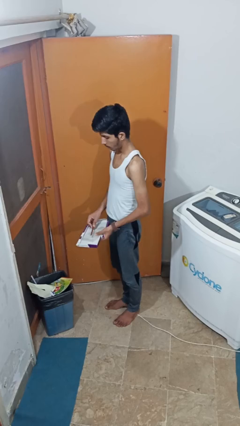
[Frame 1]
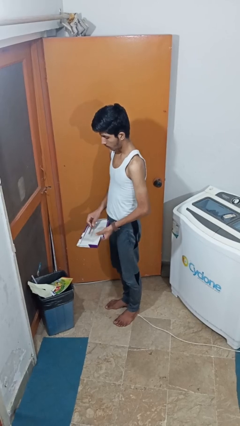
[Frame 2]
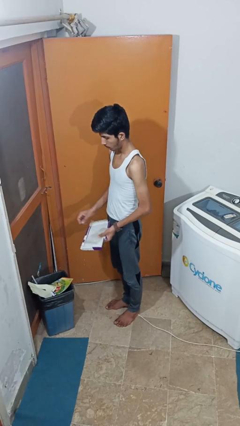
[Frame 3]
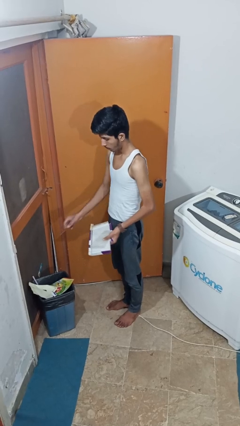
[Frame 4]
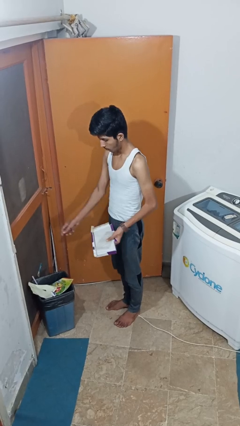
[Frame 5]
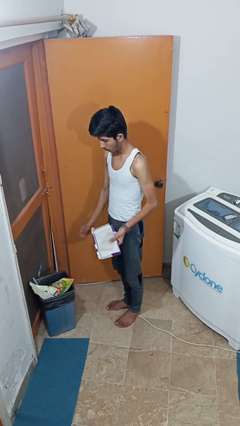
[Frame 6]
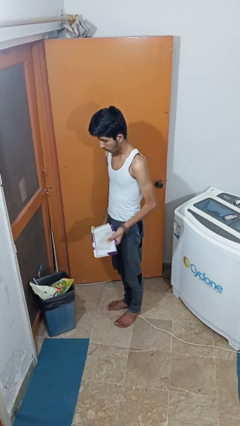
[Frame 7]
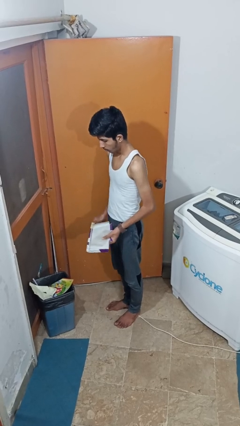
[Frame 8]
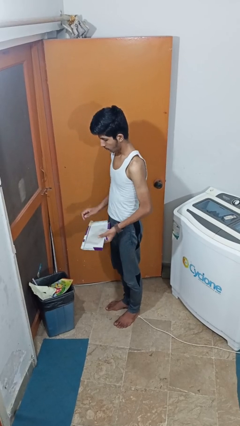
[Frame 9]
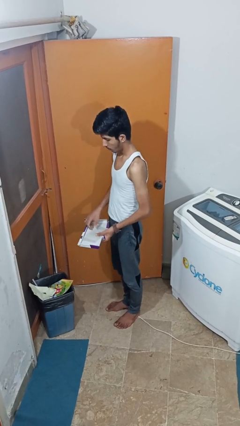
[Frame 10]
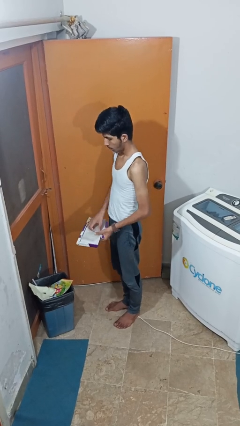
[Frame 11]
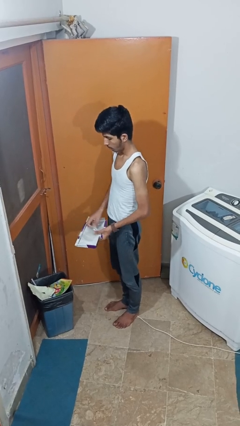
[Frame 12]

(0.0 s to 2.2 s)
person discards trash

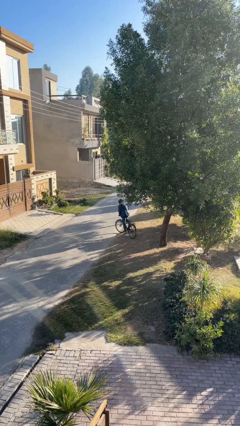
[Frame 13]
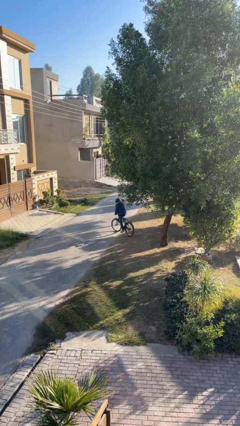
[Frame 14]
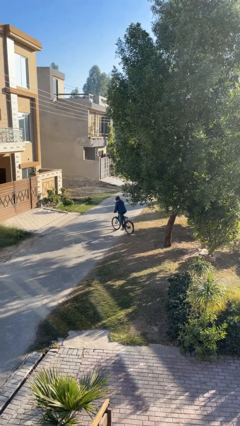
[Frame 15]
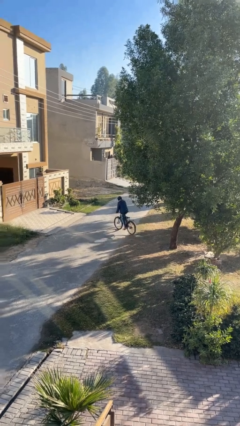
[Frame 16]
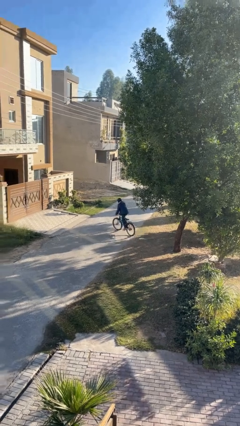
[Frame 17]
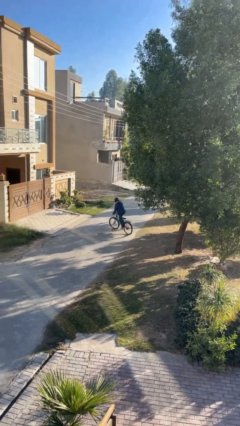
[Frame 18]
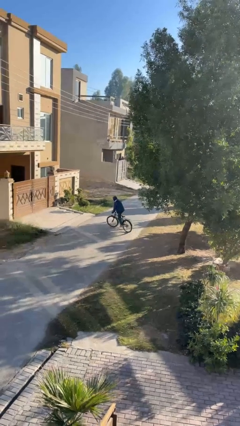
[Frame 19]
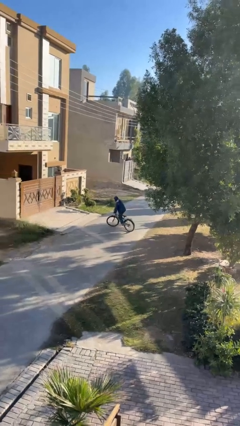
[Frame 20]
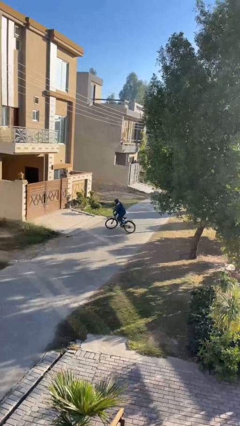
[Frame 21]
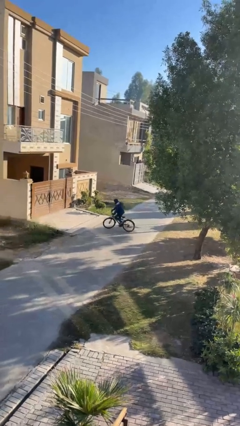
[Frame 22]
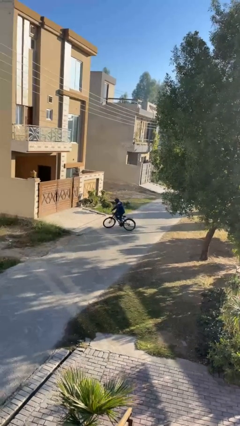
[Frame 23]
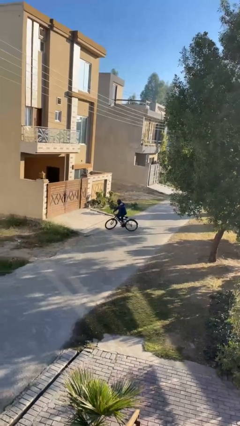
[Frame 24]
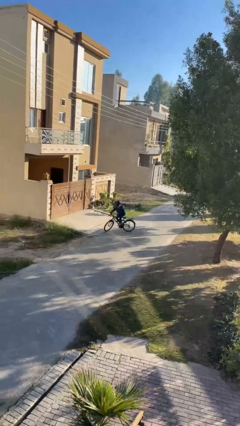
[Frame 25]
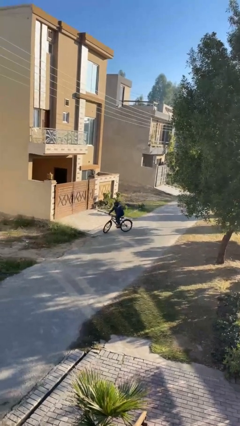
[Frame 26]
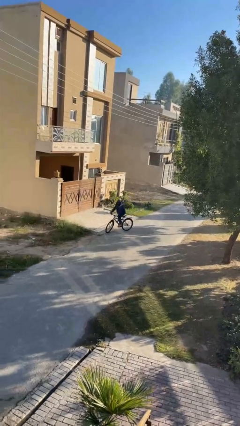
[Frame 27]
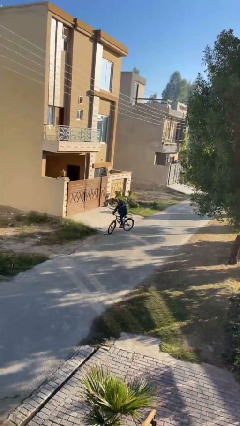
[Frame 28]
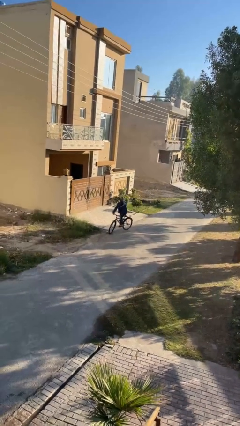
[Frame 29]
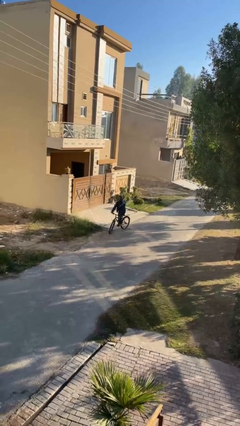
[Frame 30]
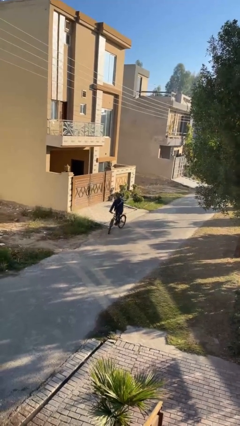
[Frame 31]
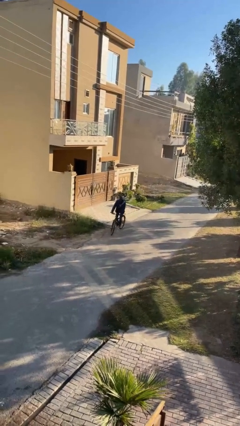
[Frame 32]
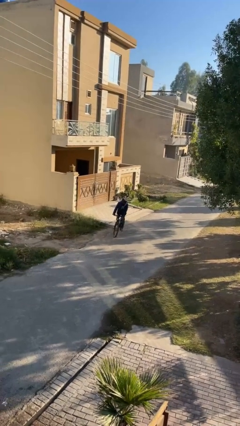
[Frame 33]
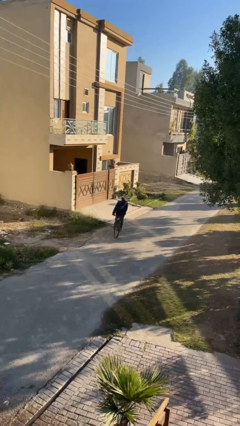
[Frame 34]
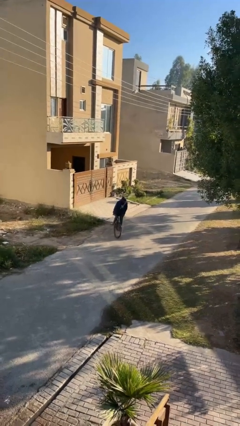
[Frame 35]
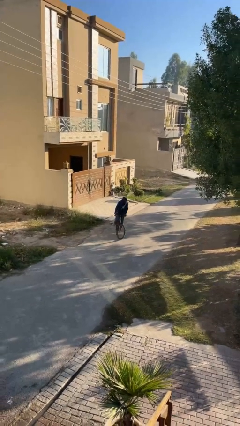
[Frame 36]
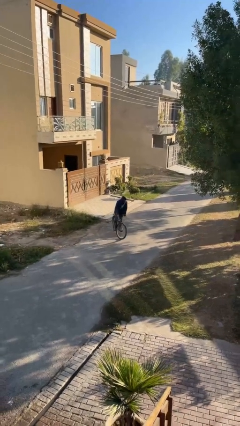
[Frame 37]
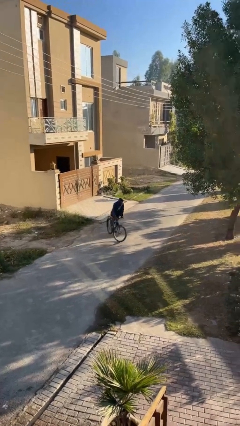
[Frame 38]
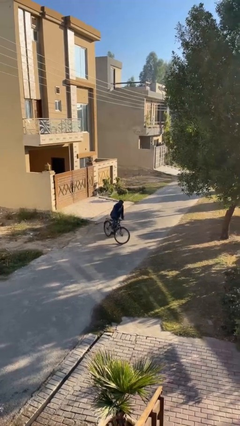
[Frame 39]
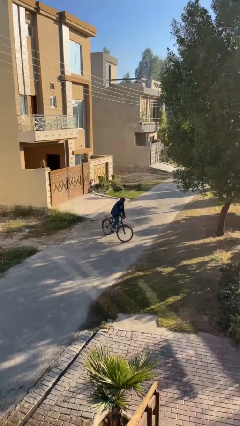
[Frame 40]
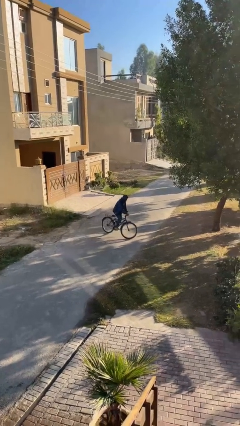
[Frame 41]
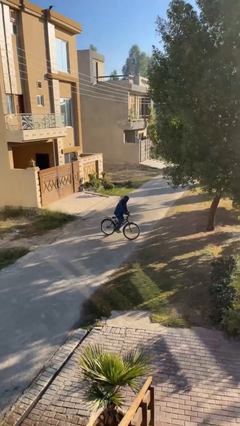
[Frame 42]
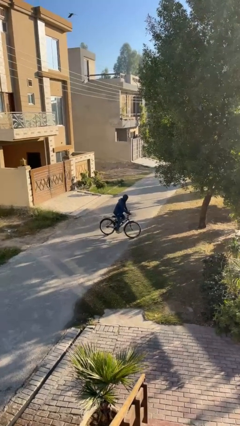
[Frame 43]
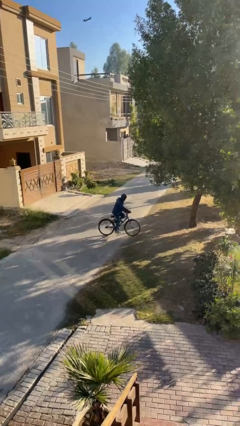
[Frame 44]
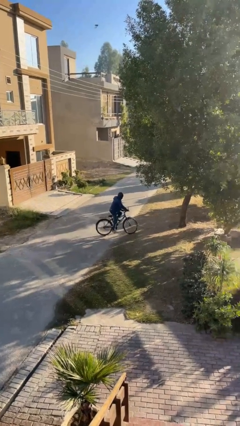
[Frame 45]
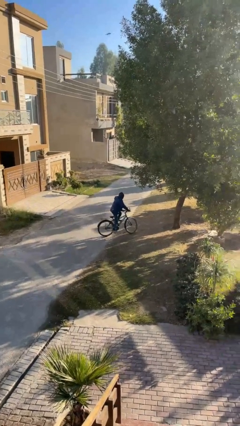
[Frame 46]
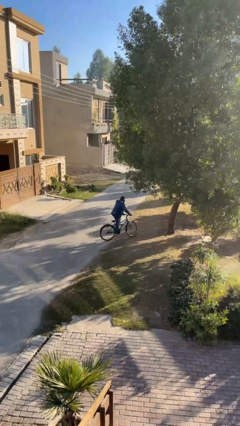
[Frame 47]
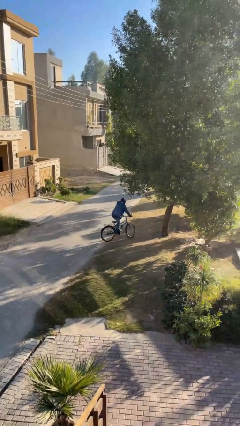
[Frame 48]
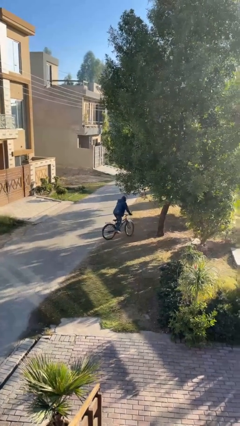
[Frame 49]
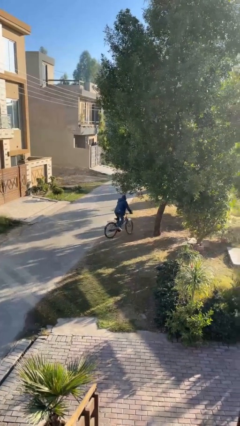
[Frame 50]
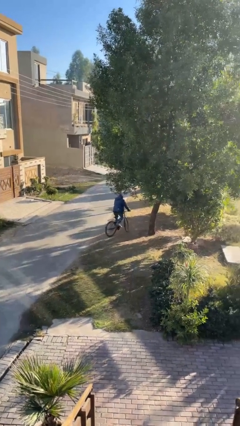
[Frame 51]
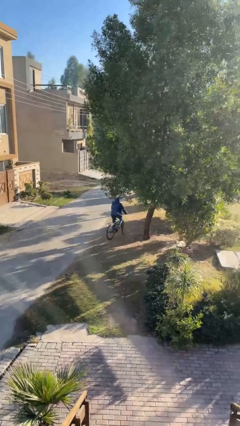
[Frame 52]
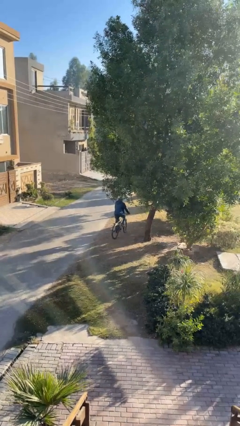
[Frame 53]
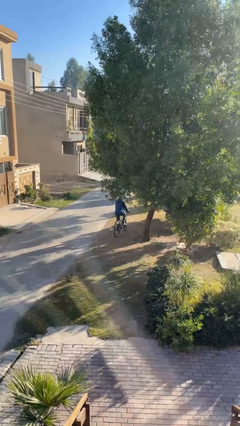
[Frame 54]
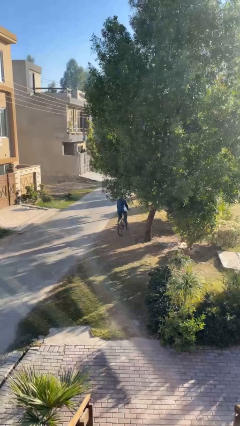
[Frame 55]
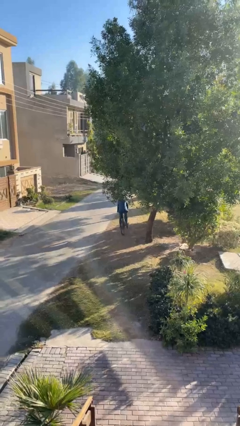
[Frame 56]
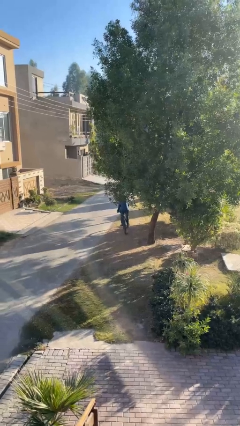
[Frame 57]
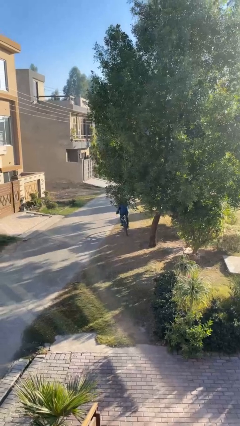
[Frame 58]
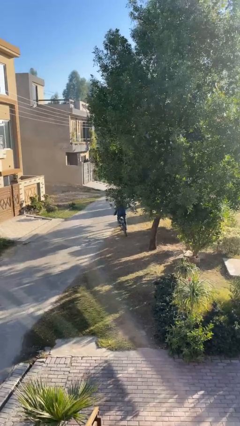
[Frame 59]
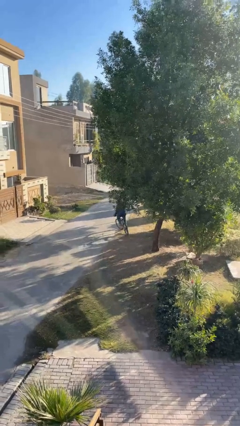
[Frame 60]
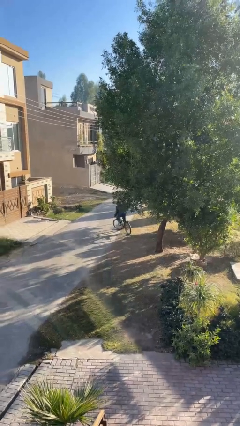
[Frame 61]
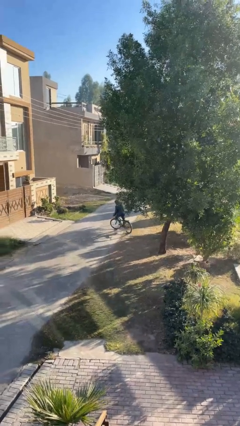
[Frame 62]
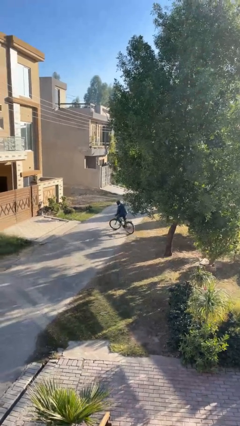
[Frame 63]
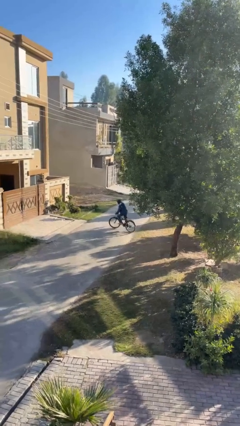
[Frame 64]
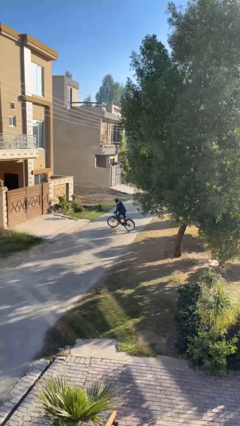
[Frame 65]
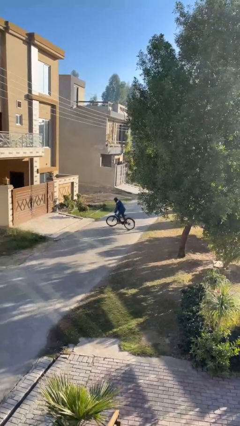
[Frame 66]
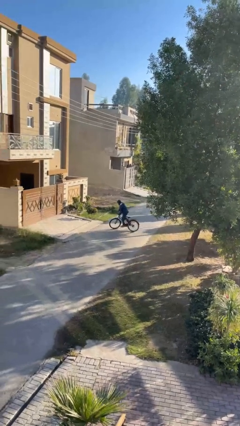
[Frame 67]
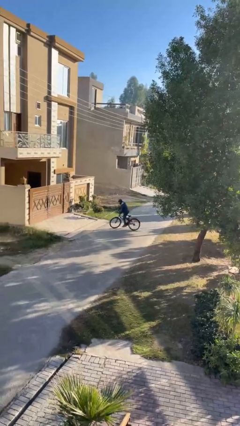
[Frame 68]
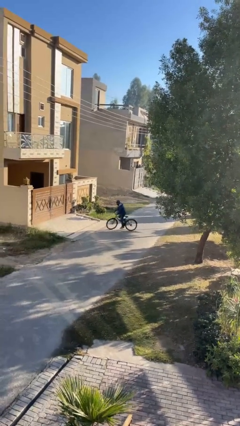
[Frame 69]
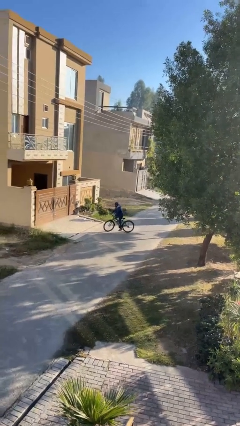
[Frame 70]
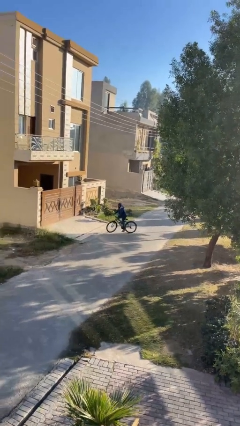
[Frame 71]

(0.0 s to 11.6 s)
person rides bicycle

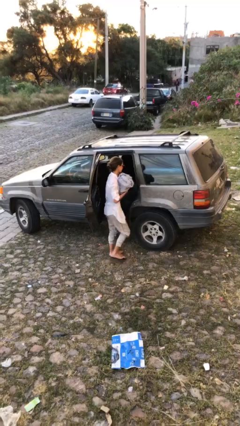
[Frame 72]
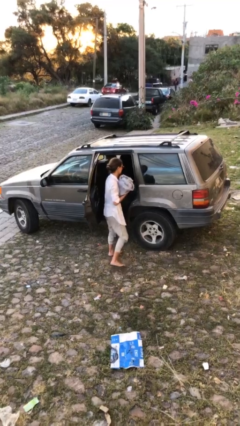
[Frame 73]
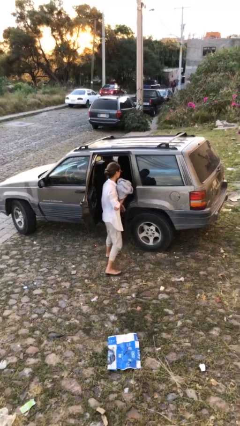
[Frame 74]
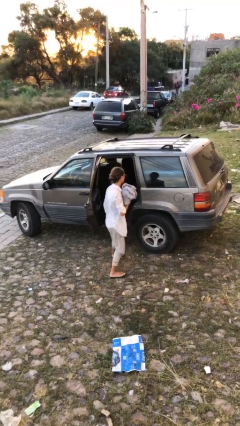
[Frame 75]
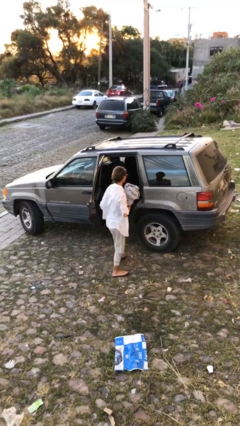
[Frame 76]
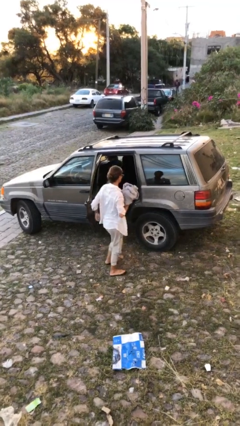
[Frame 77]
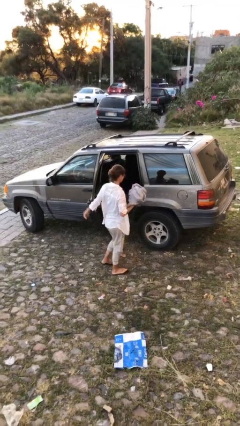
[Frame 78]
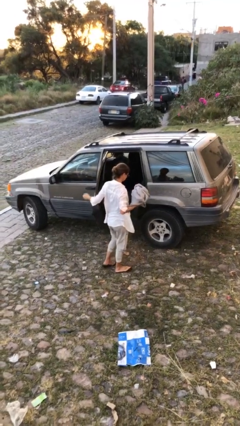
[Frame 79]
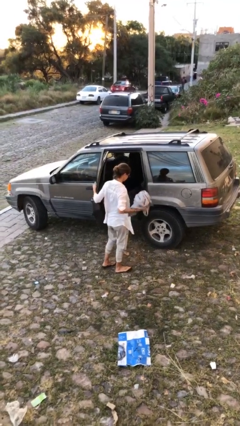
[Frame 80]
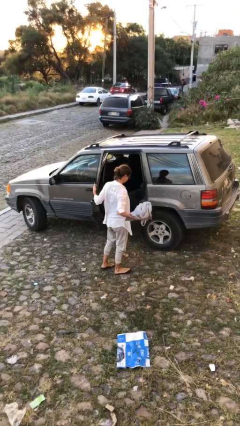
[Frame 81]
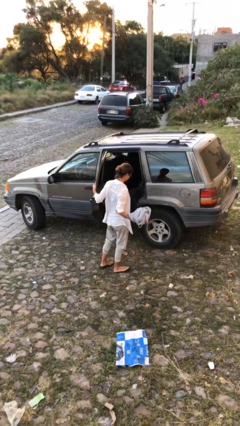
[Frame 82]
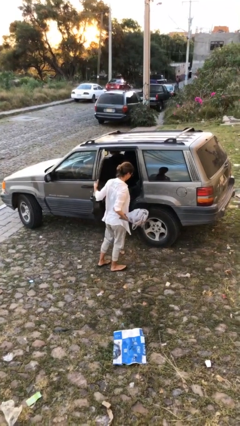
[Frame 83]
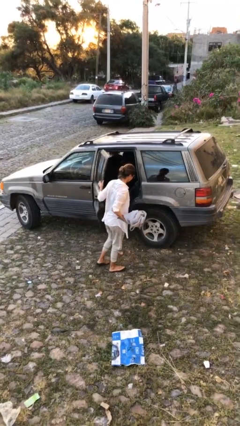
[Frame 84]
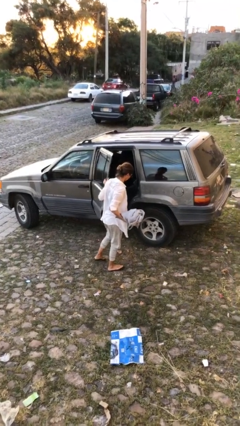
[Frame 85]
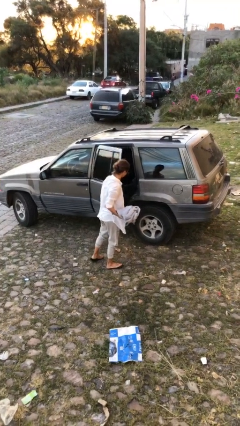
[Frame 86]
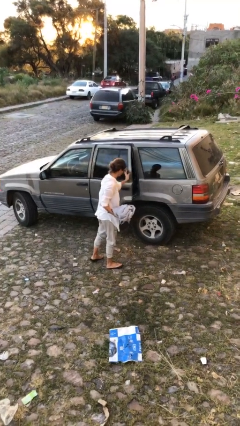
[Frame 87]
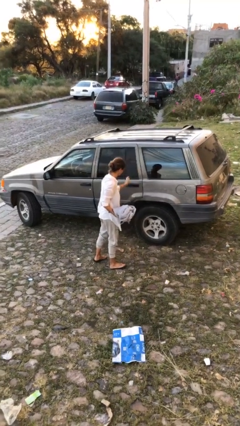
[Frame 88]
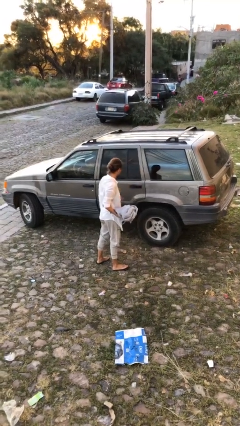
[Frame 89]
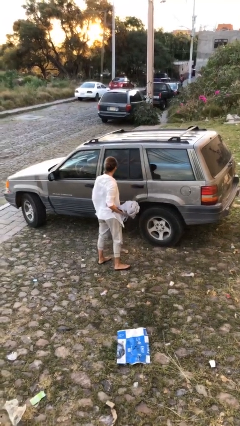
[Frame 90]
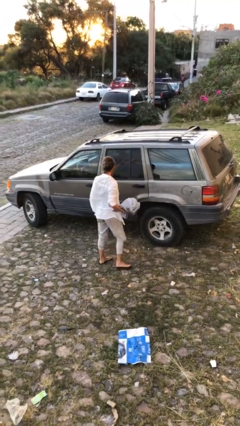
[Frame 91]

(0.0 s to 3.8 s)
person closes car door

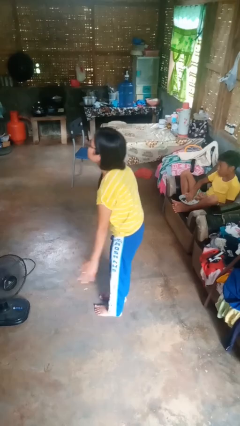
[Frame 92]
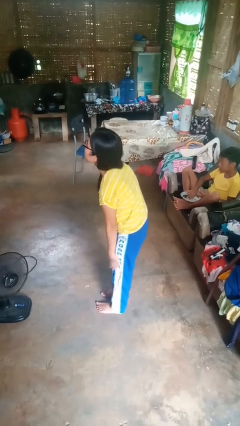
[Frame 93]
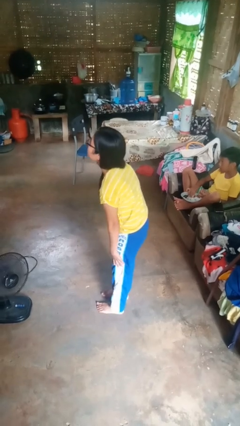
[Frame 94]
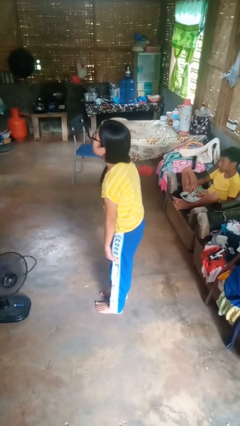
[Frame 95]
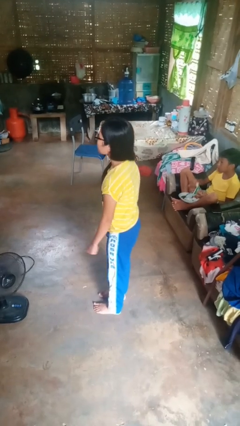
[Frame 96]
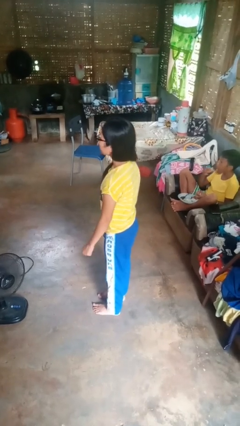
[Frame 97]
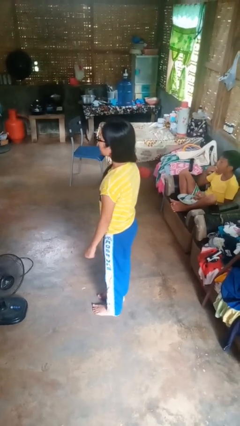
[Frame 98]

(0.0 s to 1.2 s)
person slaps hands on thighs
